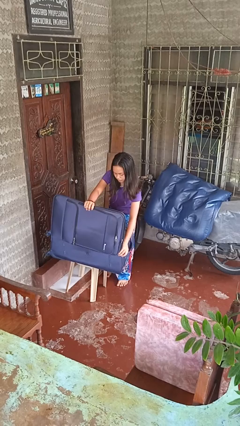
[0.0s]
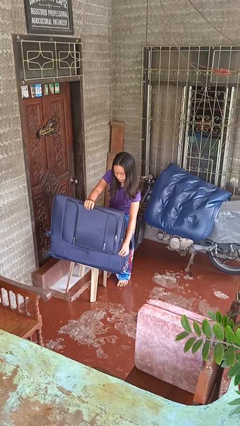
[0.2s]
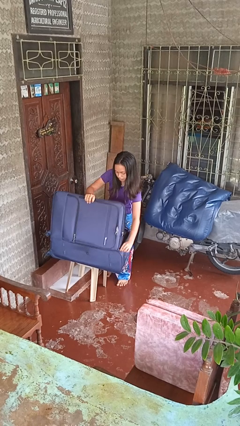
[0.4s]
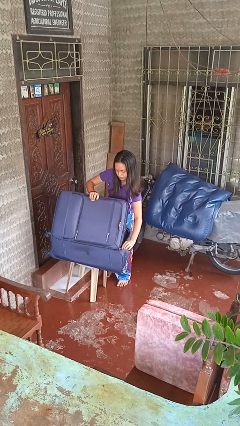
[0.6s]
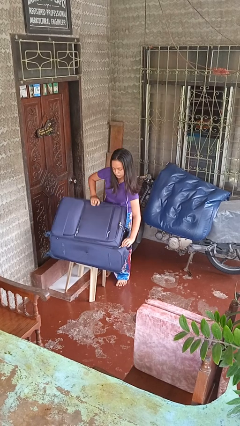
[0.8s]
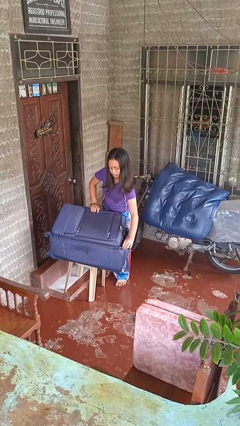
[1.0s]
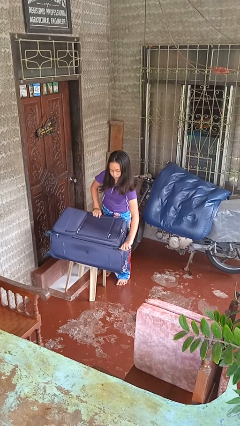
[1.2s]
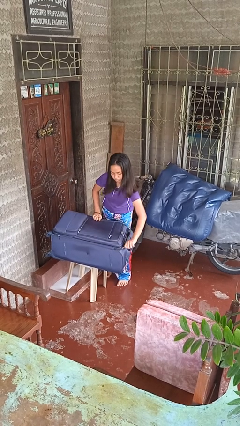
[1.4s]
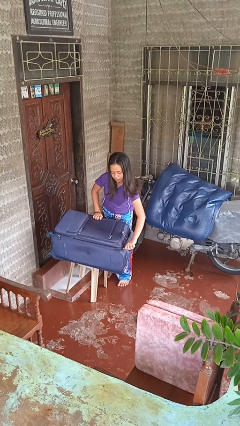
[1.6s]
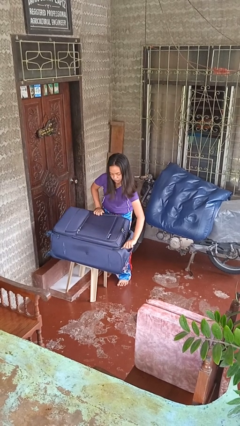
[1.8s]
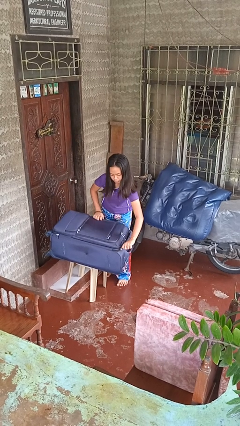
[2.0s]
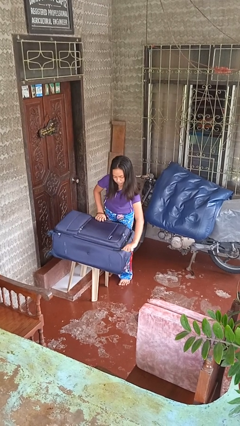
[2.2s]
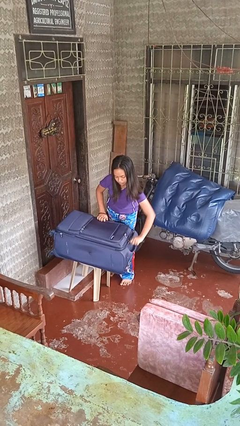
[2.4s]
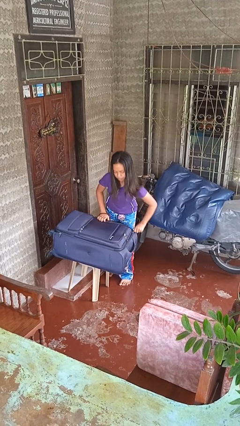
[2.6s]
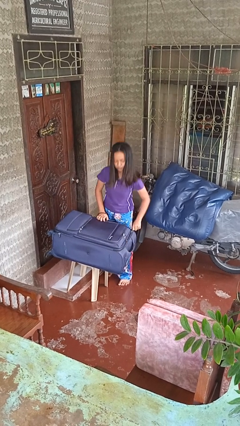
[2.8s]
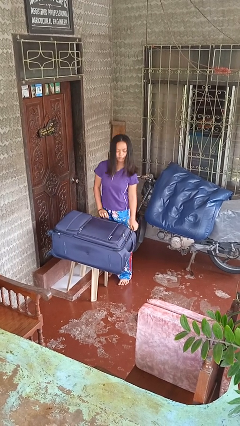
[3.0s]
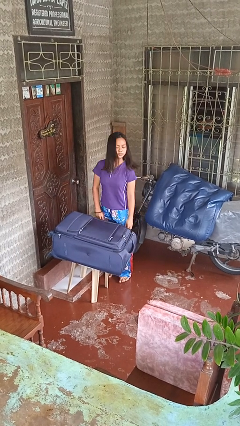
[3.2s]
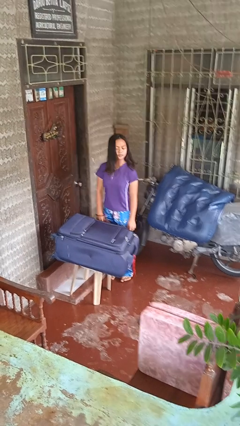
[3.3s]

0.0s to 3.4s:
person closes suitcase

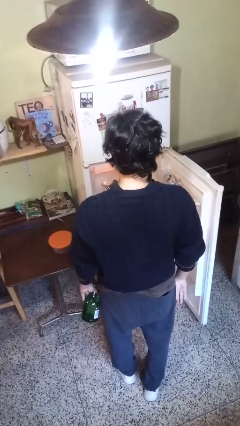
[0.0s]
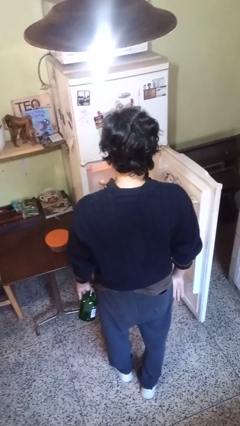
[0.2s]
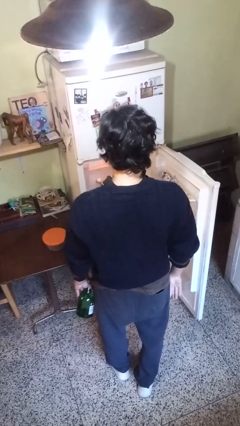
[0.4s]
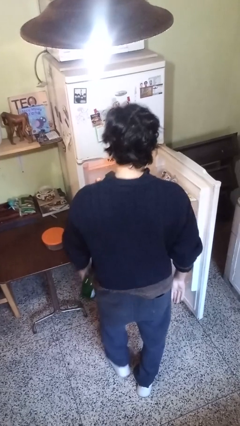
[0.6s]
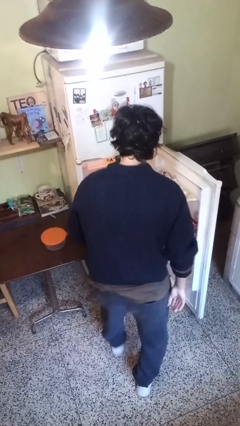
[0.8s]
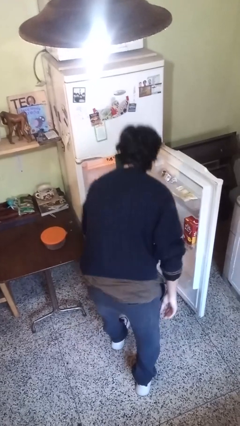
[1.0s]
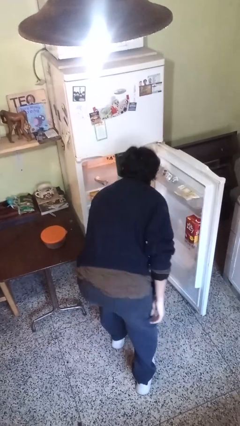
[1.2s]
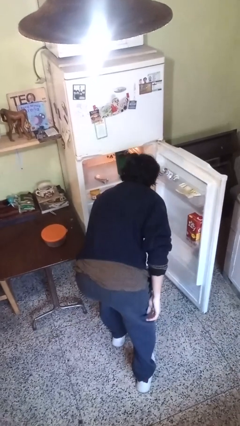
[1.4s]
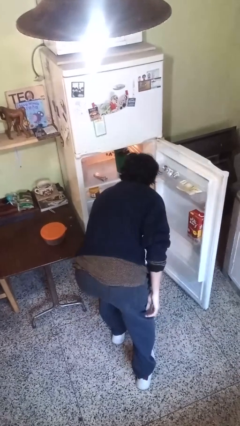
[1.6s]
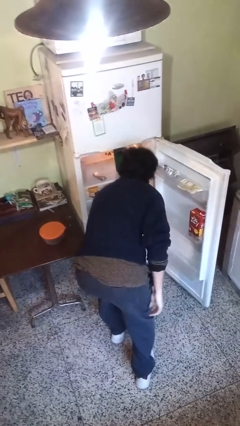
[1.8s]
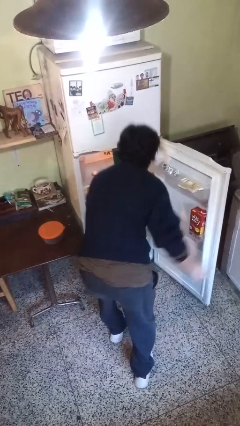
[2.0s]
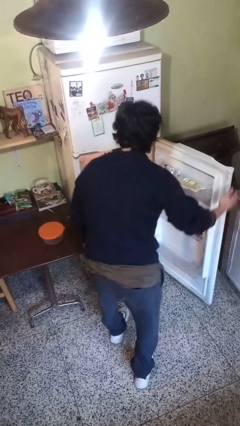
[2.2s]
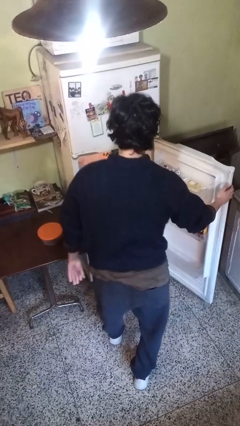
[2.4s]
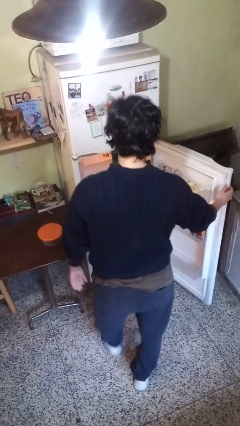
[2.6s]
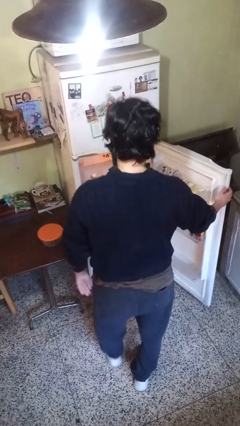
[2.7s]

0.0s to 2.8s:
person puts object into refrigerator

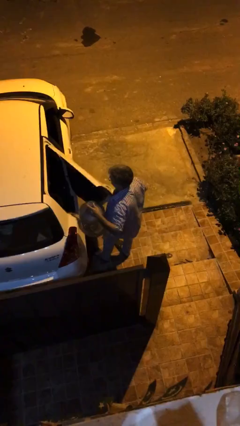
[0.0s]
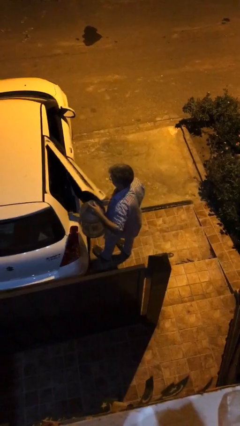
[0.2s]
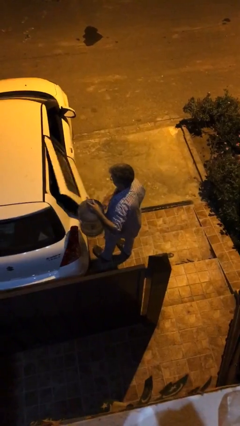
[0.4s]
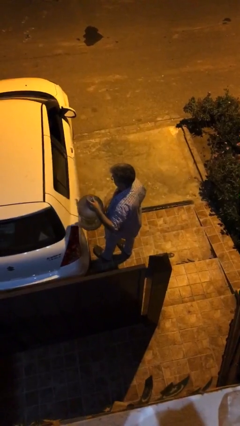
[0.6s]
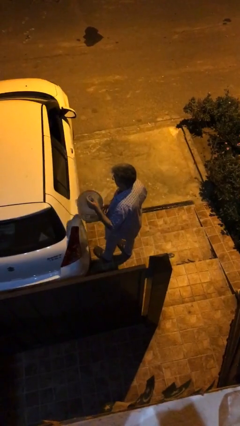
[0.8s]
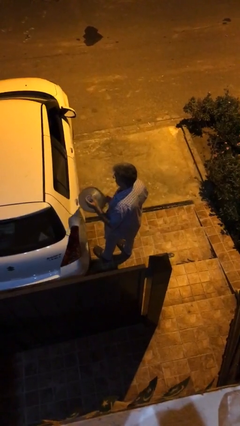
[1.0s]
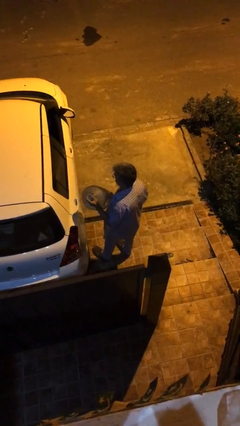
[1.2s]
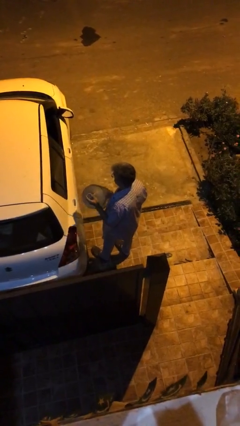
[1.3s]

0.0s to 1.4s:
person closes car door

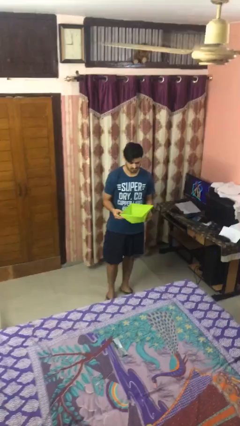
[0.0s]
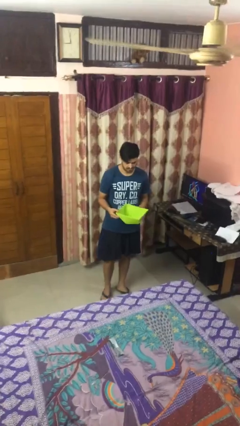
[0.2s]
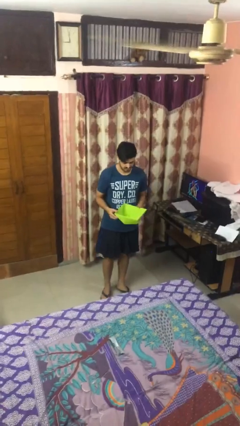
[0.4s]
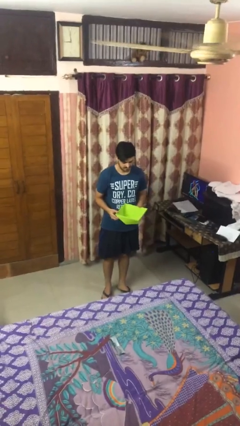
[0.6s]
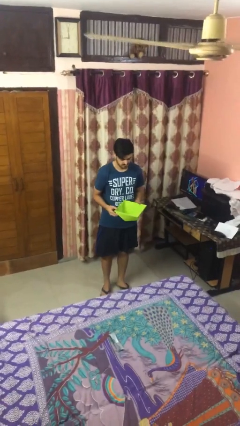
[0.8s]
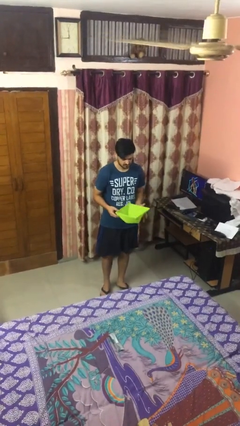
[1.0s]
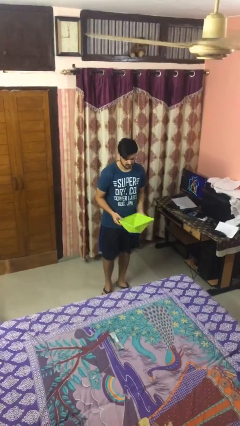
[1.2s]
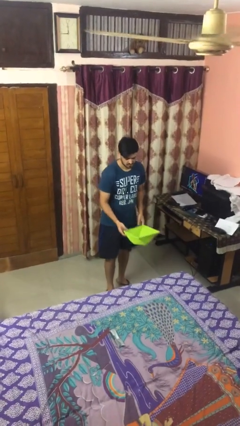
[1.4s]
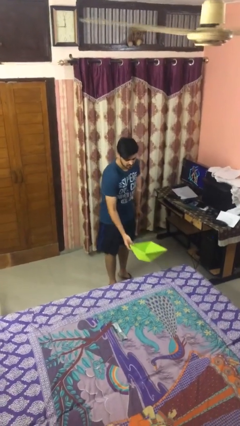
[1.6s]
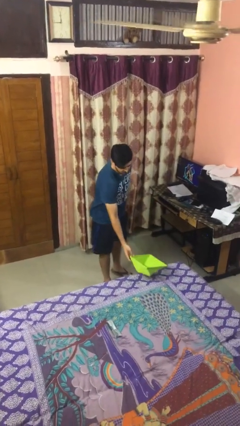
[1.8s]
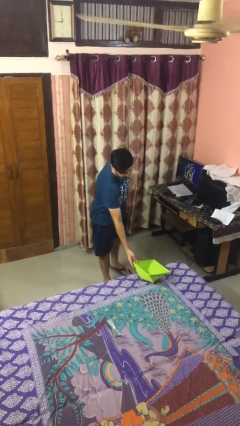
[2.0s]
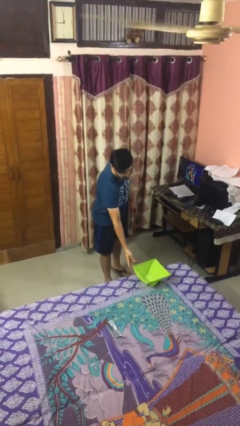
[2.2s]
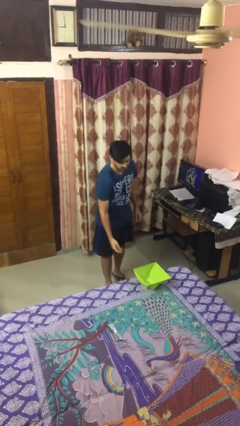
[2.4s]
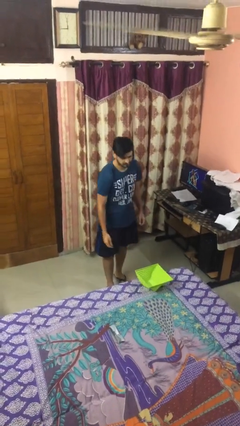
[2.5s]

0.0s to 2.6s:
person puts down object on bed

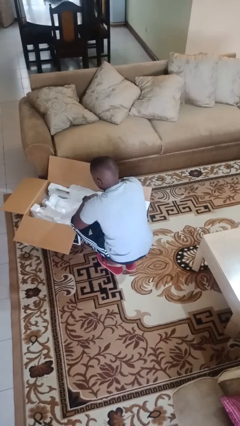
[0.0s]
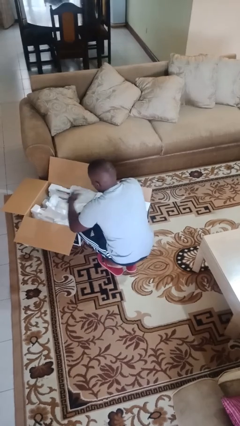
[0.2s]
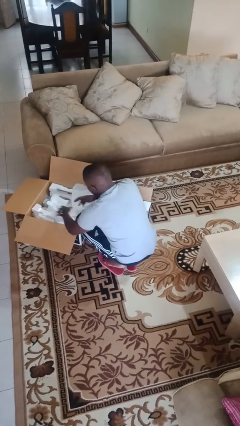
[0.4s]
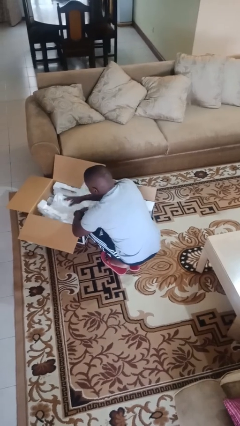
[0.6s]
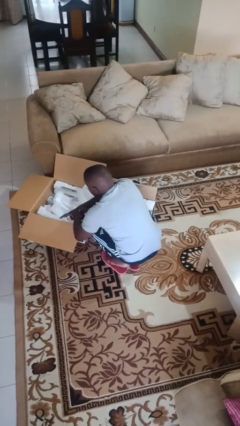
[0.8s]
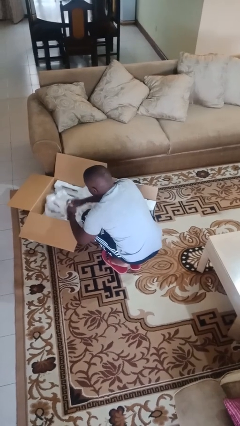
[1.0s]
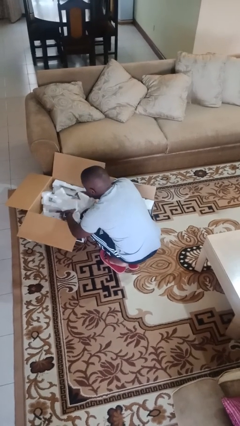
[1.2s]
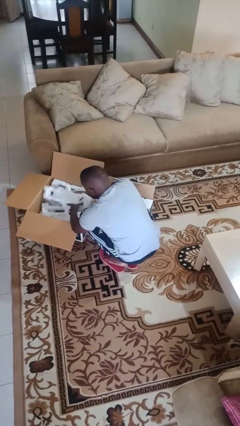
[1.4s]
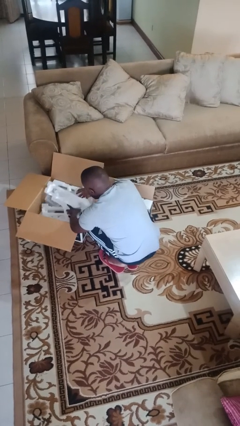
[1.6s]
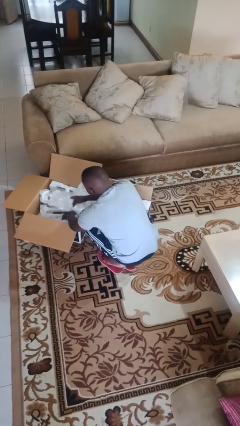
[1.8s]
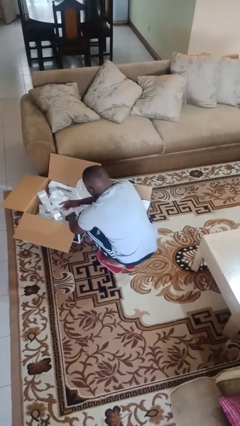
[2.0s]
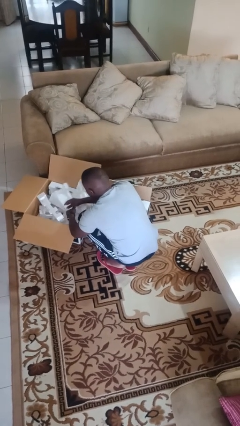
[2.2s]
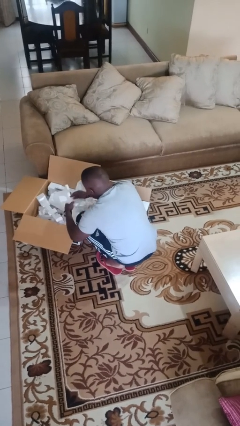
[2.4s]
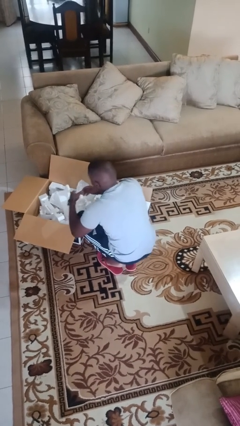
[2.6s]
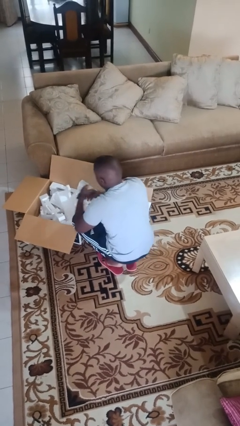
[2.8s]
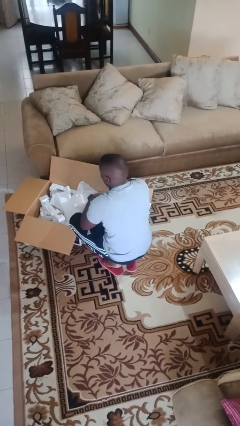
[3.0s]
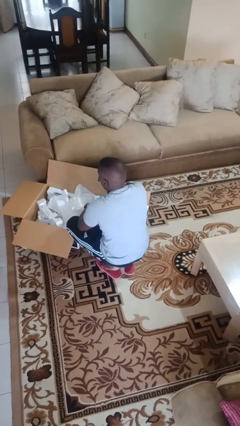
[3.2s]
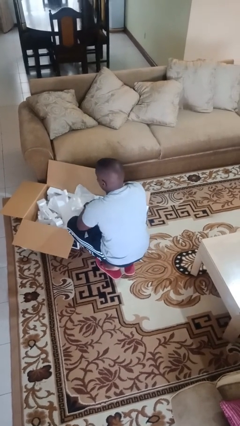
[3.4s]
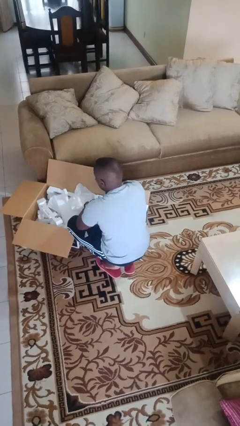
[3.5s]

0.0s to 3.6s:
person searches in box

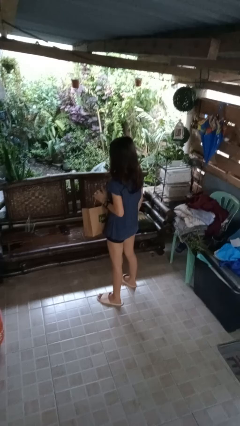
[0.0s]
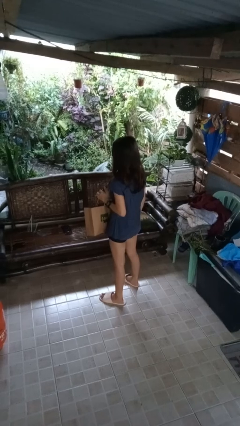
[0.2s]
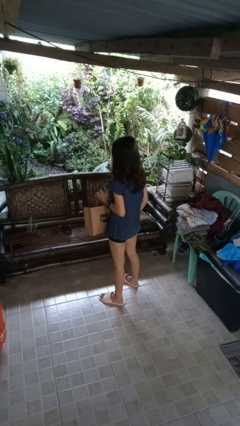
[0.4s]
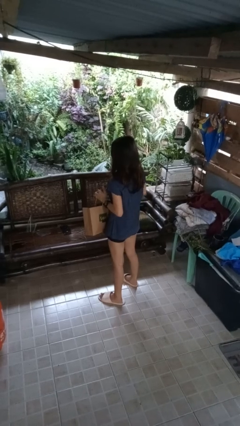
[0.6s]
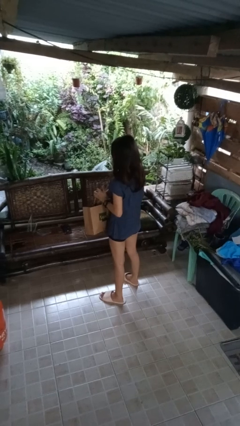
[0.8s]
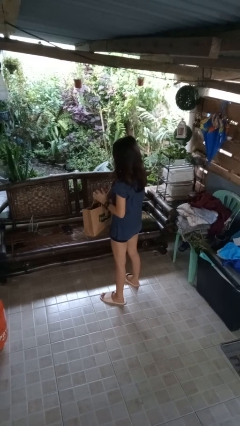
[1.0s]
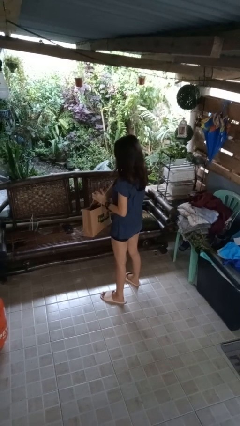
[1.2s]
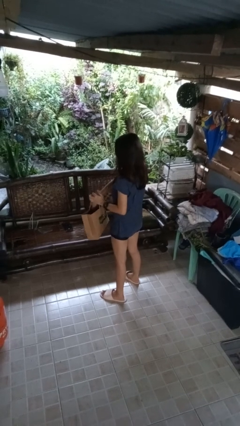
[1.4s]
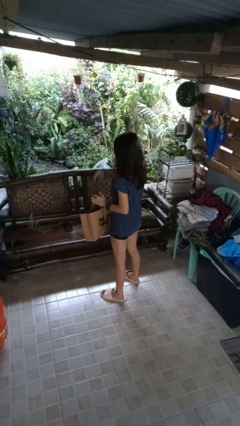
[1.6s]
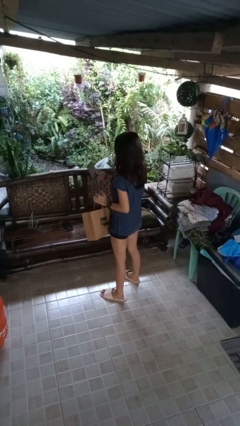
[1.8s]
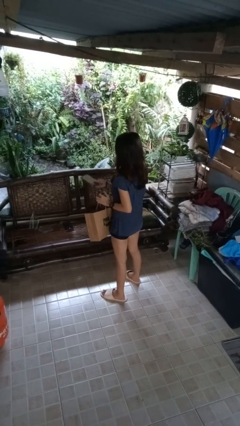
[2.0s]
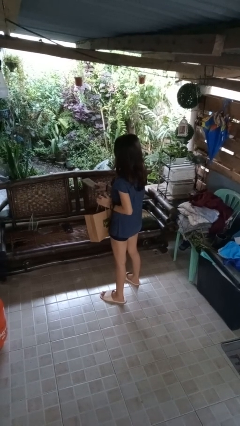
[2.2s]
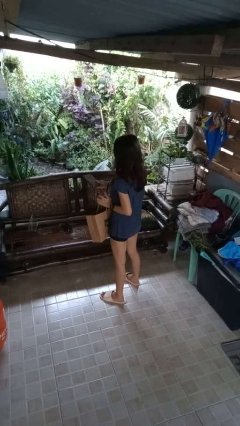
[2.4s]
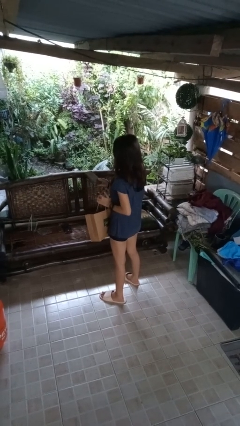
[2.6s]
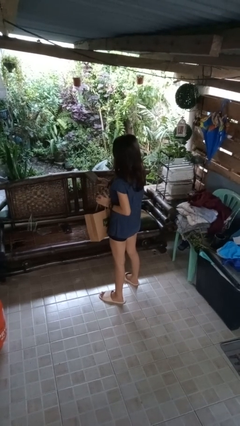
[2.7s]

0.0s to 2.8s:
person takes object from bag

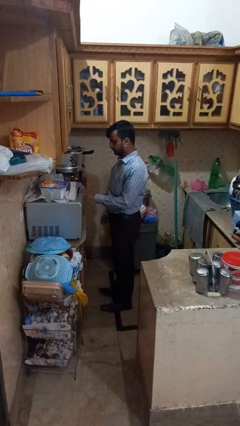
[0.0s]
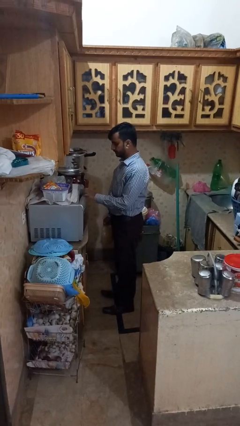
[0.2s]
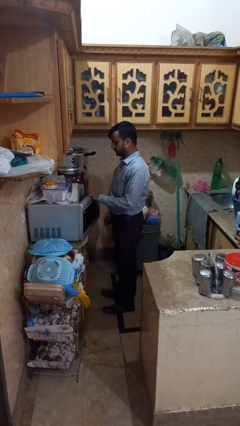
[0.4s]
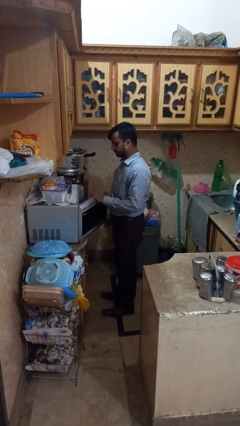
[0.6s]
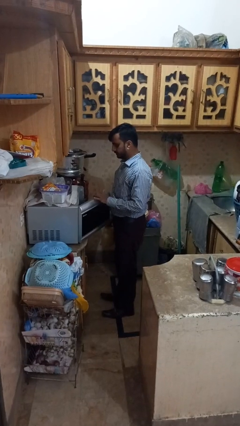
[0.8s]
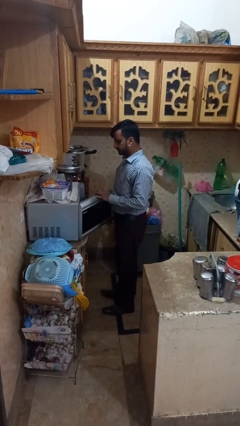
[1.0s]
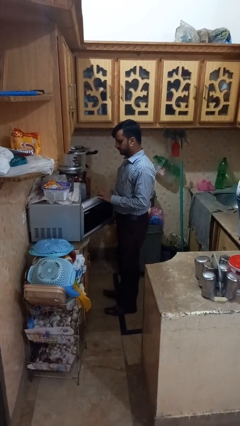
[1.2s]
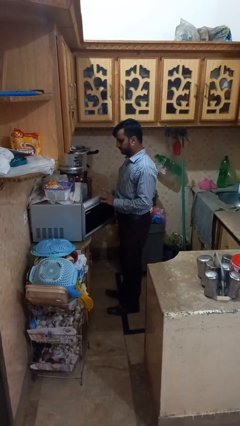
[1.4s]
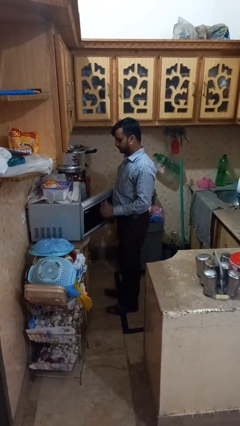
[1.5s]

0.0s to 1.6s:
person opens microwave
